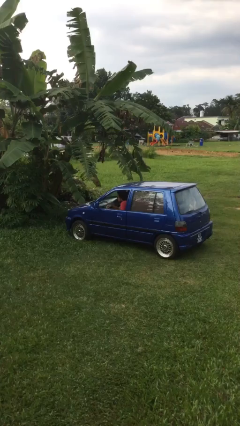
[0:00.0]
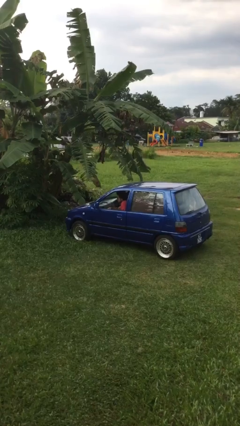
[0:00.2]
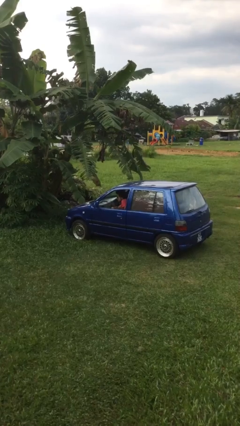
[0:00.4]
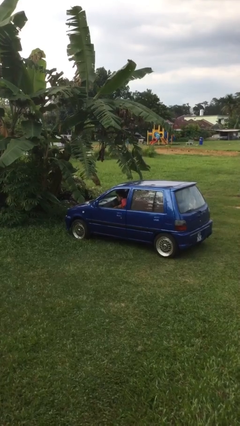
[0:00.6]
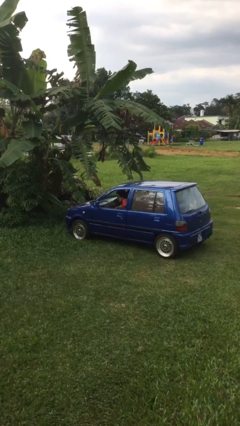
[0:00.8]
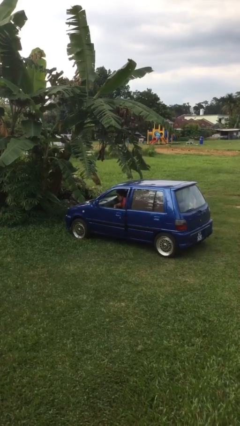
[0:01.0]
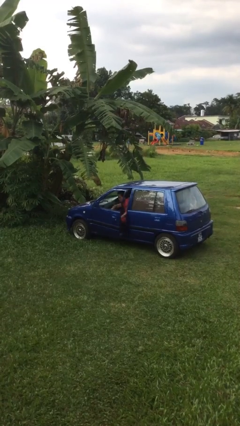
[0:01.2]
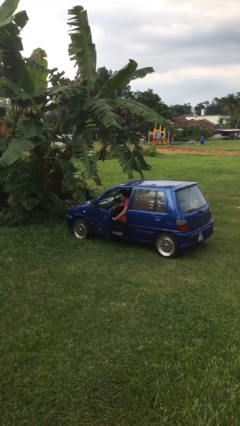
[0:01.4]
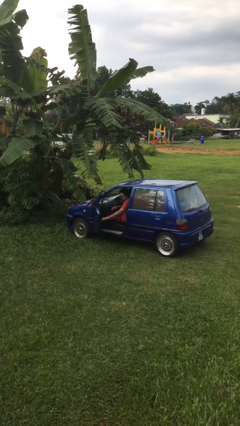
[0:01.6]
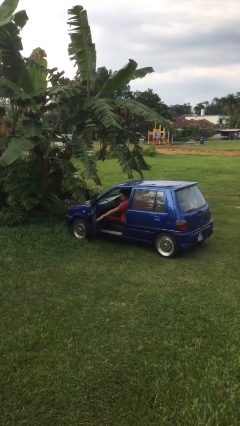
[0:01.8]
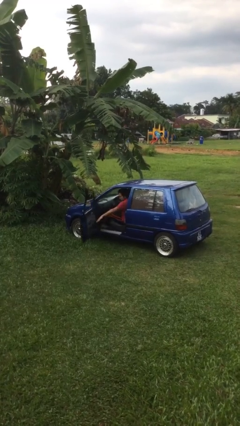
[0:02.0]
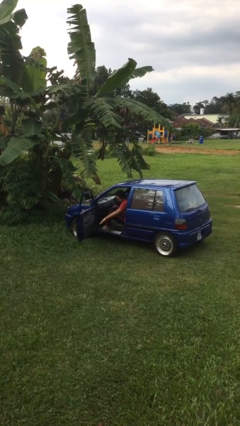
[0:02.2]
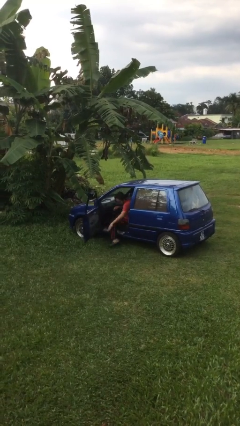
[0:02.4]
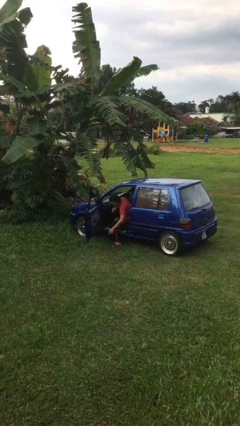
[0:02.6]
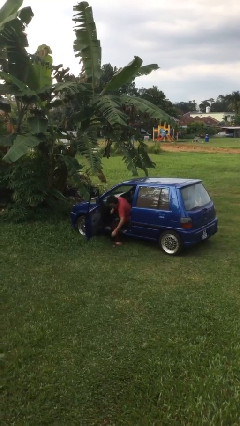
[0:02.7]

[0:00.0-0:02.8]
person opens car door

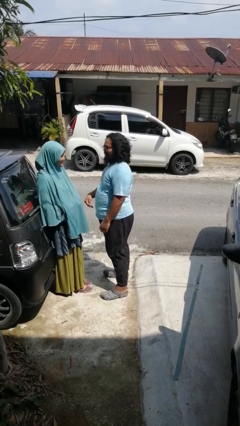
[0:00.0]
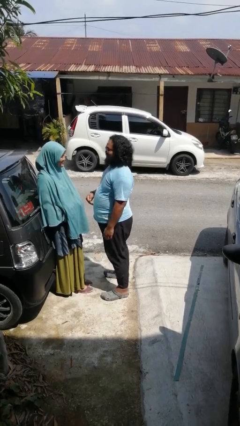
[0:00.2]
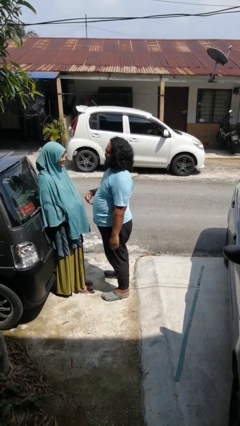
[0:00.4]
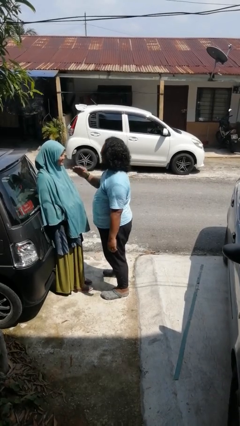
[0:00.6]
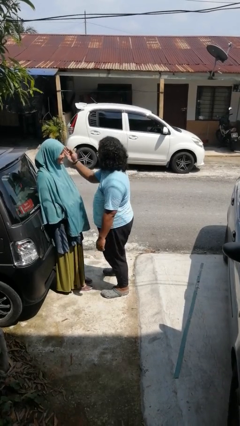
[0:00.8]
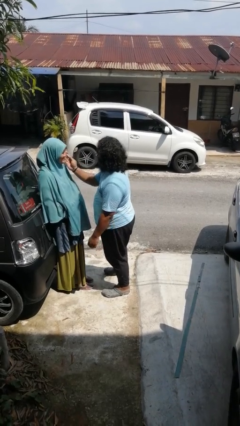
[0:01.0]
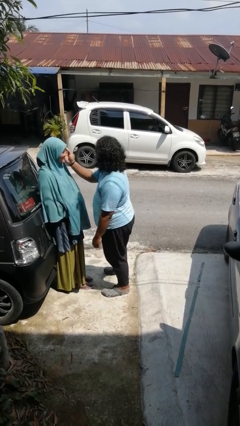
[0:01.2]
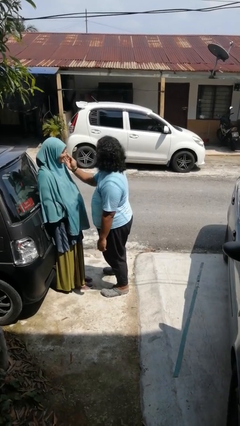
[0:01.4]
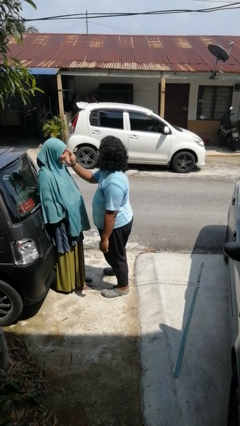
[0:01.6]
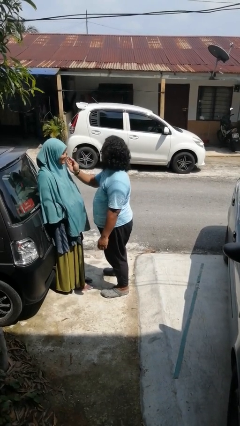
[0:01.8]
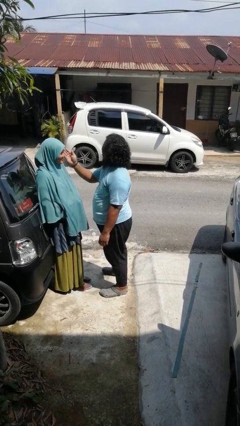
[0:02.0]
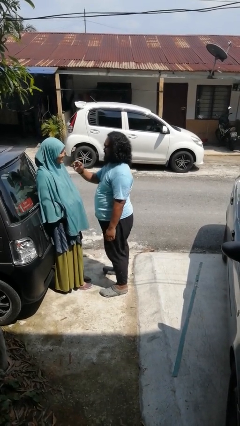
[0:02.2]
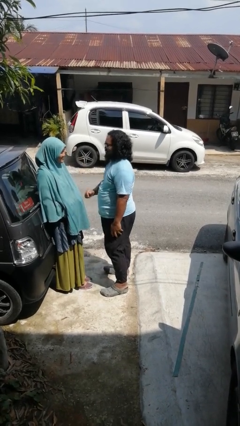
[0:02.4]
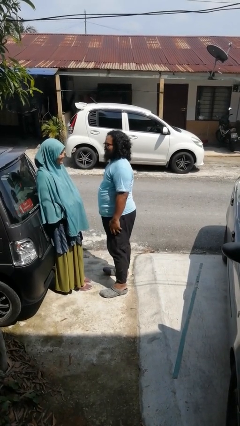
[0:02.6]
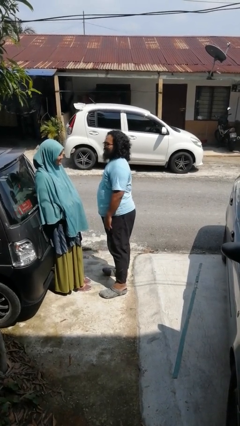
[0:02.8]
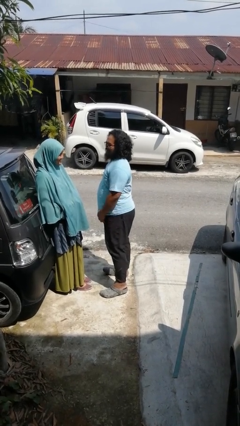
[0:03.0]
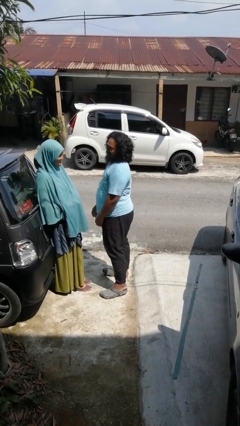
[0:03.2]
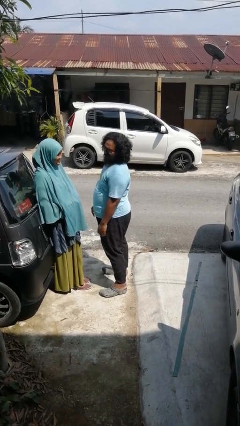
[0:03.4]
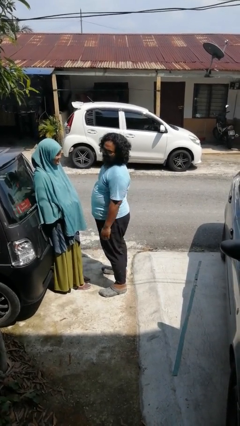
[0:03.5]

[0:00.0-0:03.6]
person touches face of person

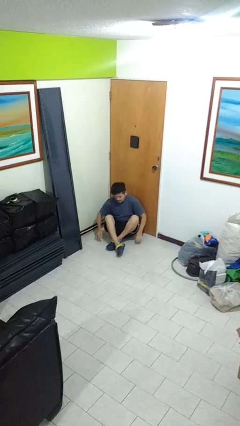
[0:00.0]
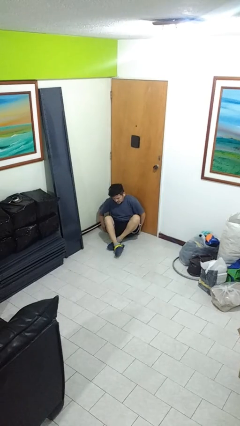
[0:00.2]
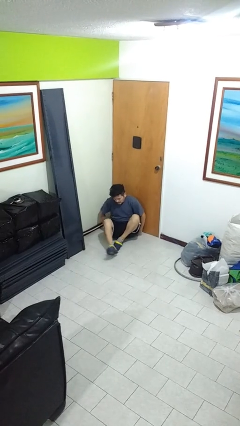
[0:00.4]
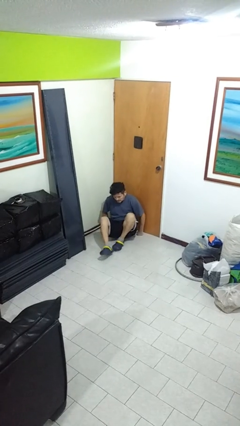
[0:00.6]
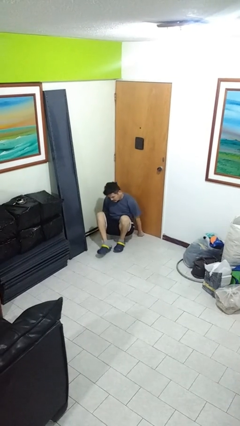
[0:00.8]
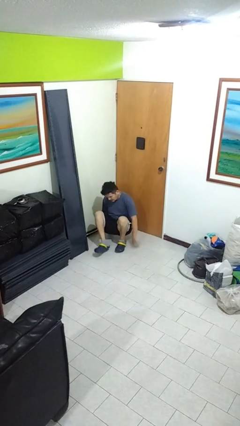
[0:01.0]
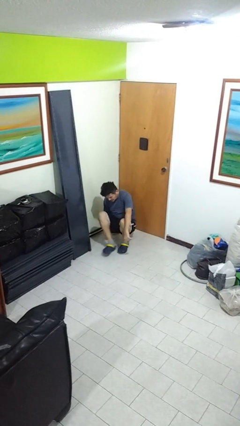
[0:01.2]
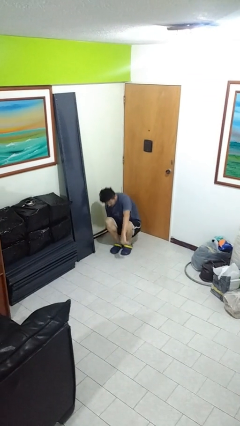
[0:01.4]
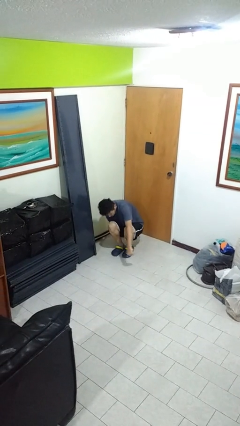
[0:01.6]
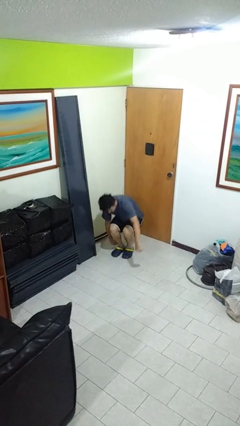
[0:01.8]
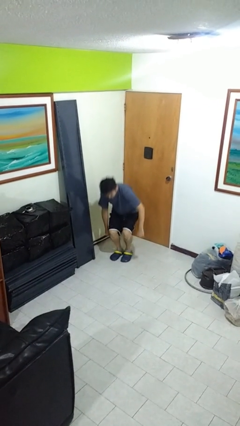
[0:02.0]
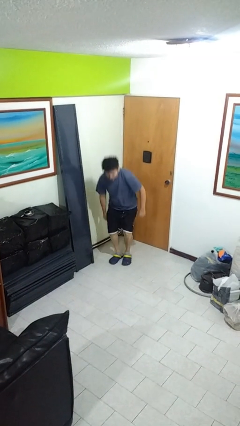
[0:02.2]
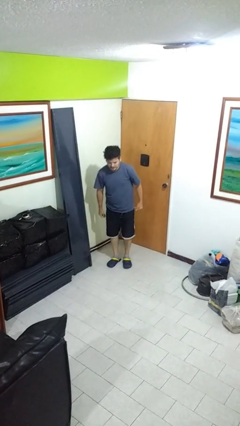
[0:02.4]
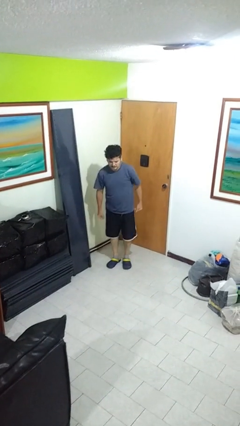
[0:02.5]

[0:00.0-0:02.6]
person stands up from floor

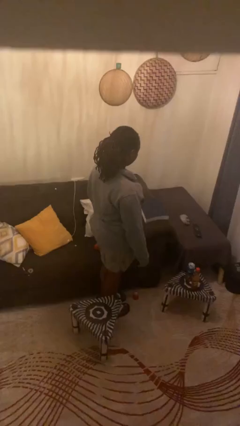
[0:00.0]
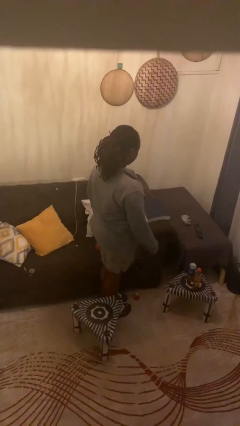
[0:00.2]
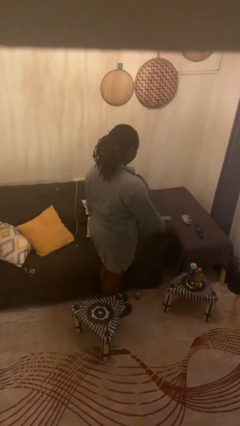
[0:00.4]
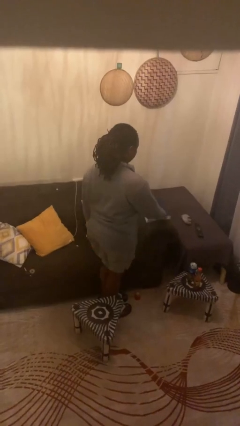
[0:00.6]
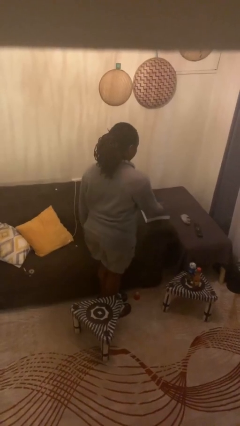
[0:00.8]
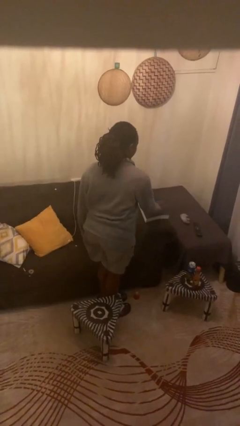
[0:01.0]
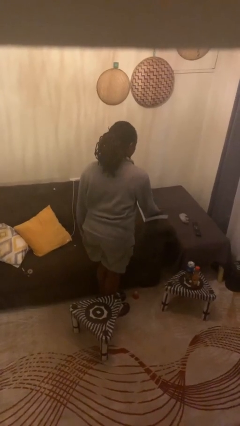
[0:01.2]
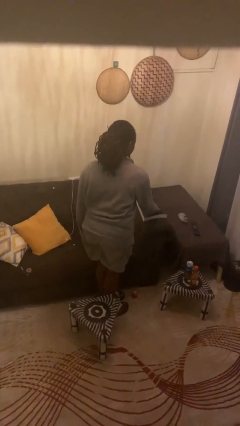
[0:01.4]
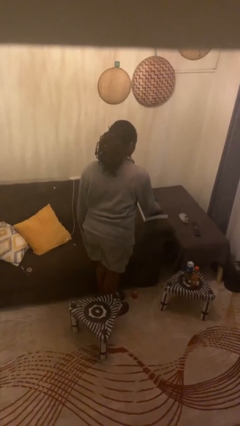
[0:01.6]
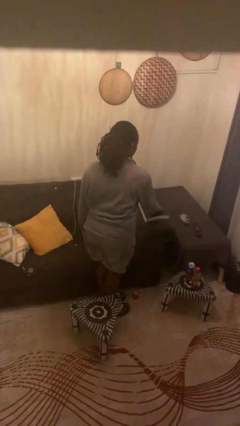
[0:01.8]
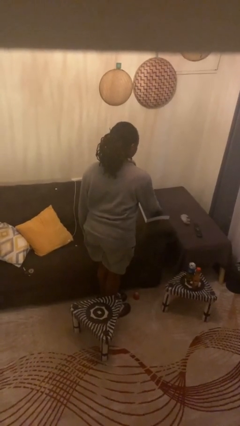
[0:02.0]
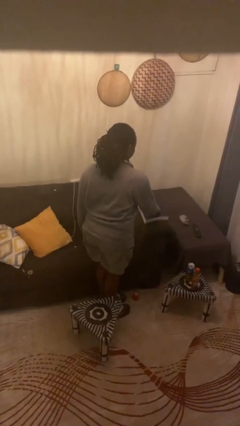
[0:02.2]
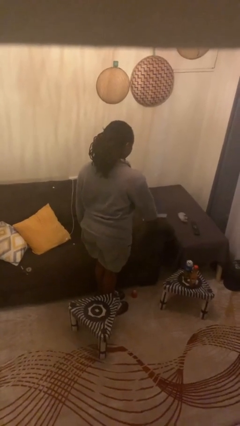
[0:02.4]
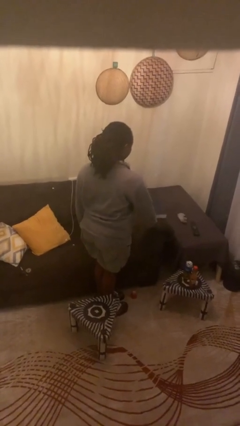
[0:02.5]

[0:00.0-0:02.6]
person taps object with finger

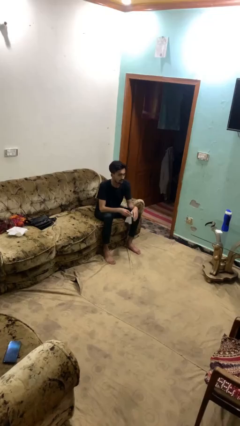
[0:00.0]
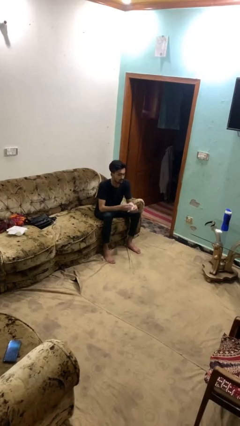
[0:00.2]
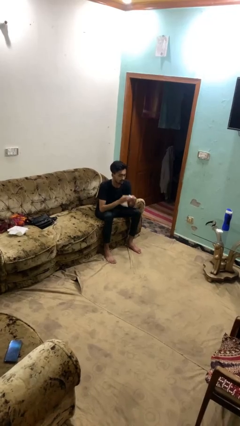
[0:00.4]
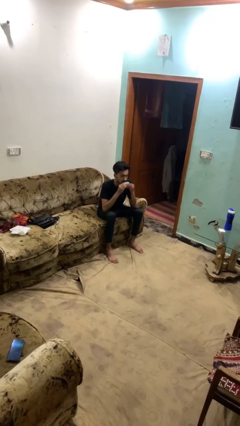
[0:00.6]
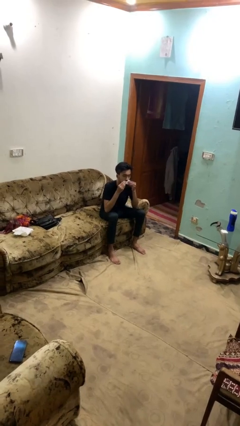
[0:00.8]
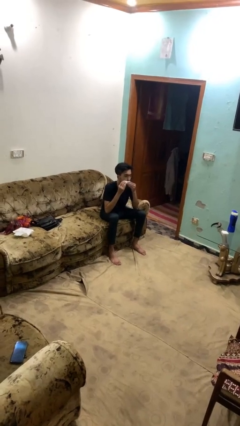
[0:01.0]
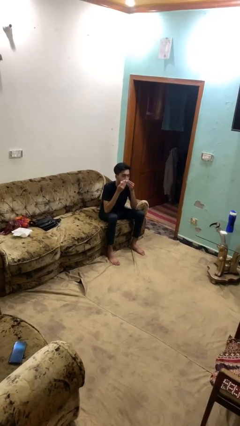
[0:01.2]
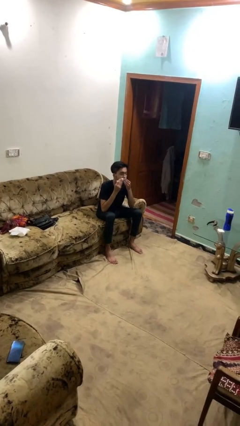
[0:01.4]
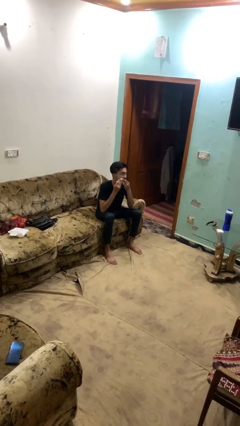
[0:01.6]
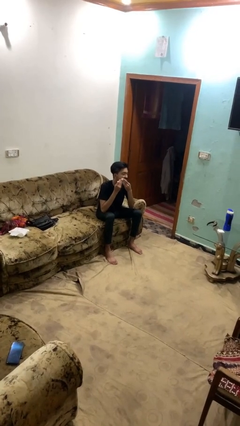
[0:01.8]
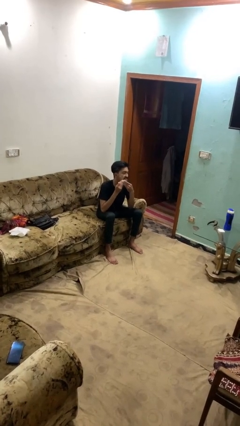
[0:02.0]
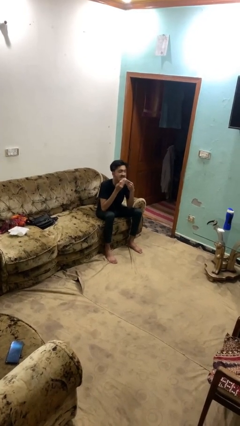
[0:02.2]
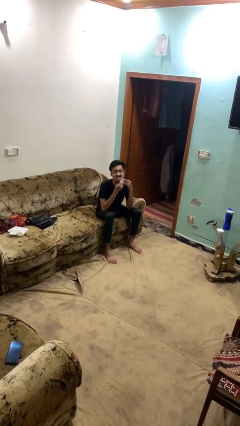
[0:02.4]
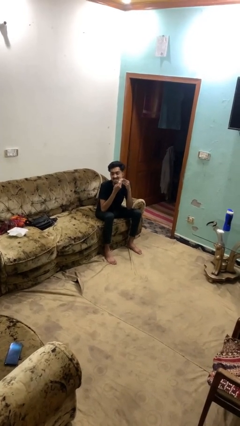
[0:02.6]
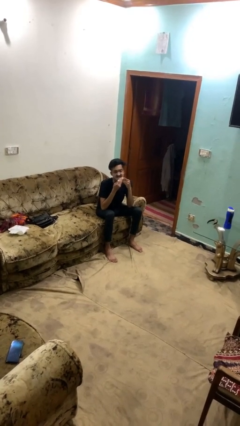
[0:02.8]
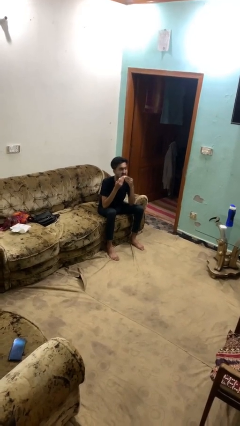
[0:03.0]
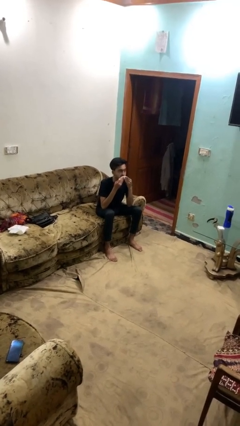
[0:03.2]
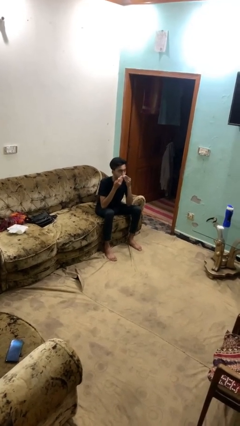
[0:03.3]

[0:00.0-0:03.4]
person wipes mouth with napkin

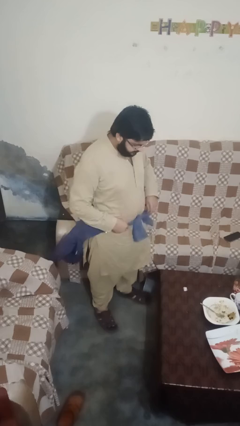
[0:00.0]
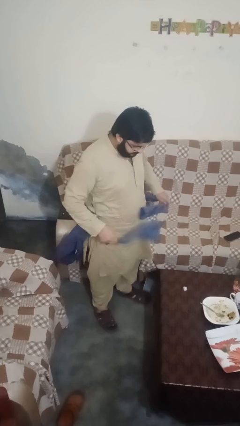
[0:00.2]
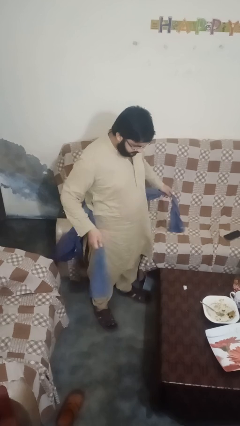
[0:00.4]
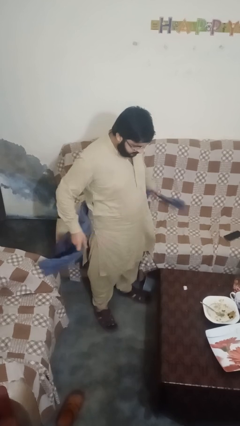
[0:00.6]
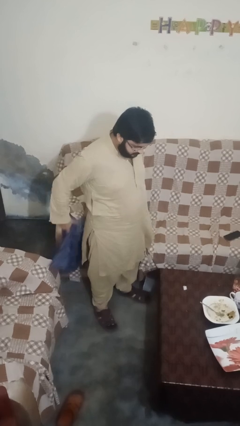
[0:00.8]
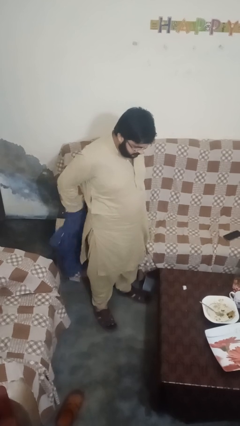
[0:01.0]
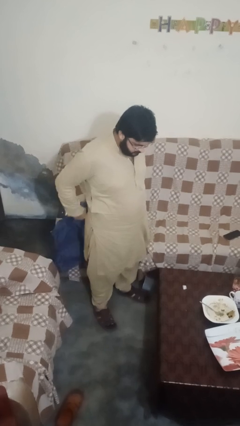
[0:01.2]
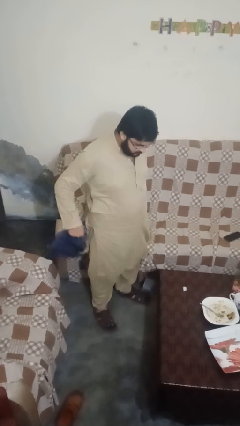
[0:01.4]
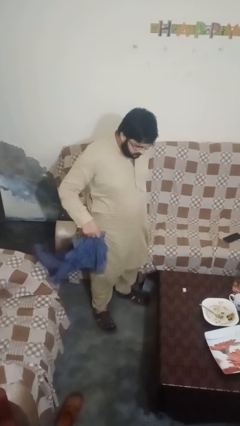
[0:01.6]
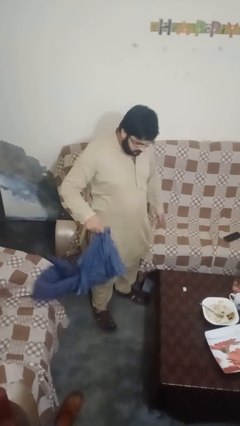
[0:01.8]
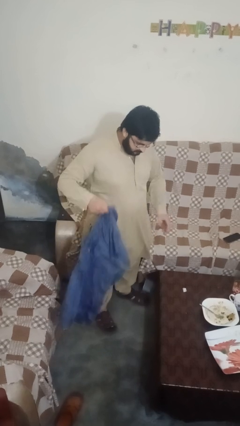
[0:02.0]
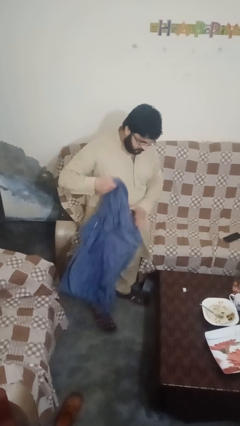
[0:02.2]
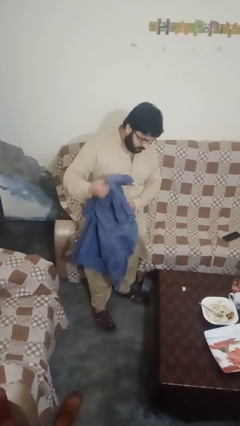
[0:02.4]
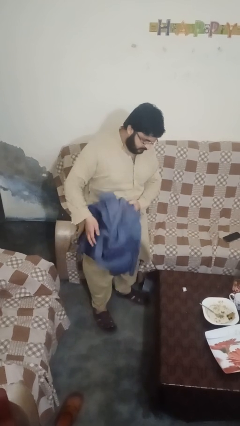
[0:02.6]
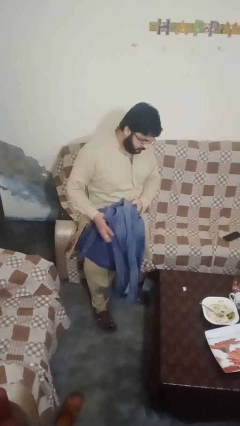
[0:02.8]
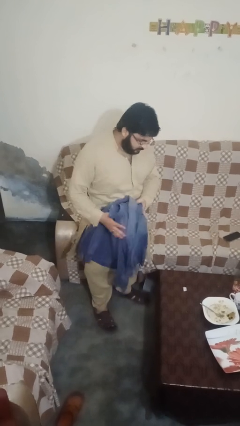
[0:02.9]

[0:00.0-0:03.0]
person unties jacket around waist
